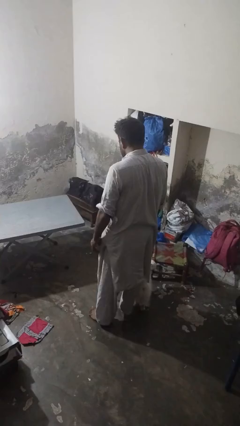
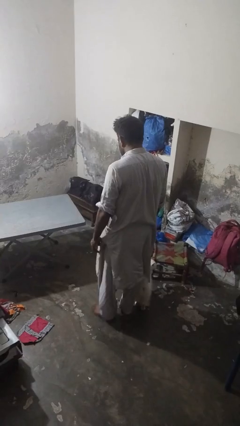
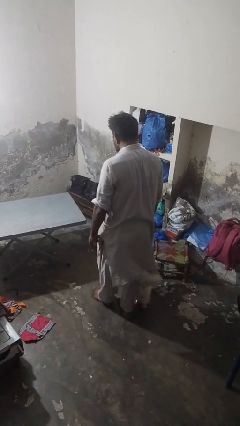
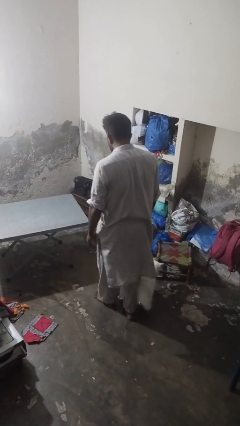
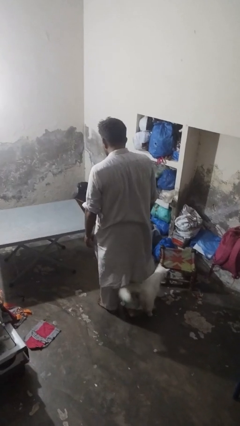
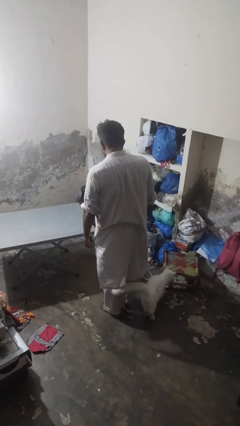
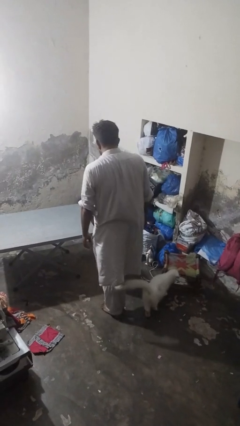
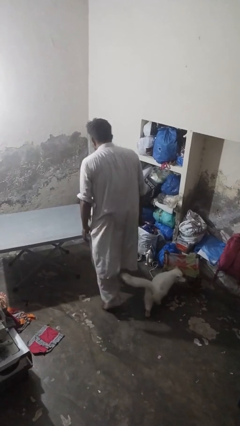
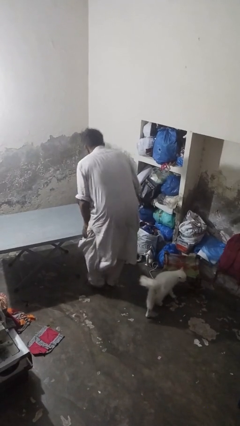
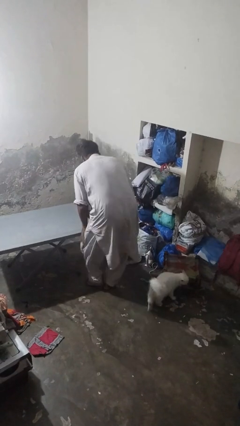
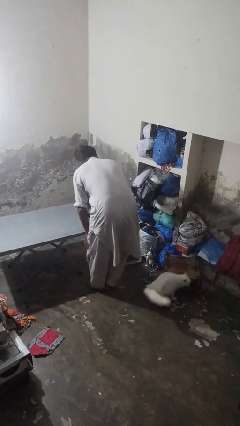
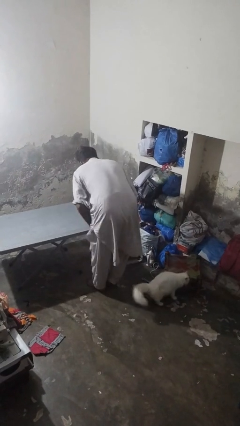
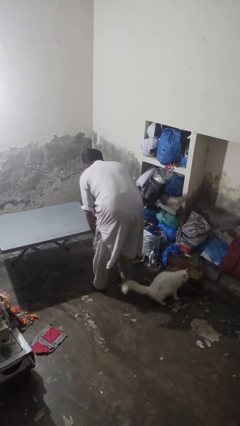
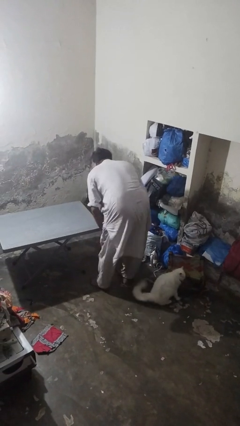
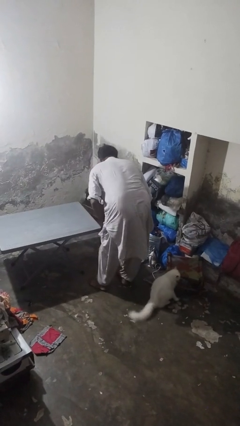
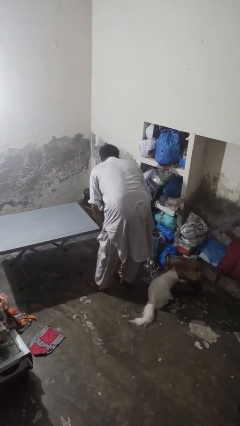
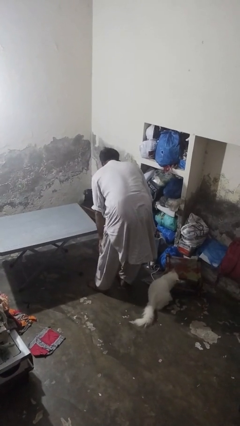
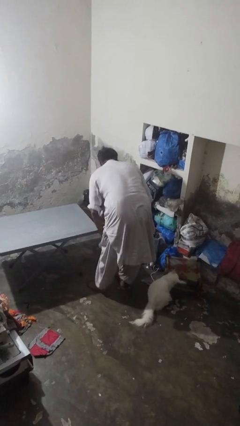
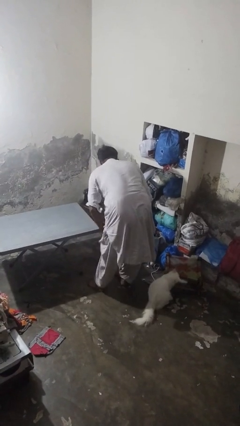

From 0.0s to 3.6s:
person bumps into table

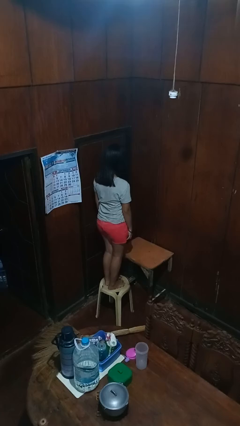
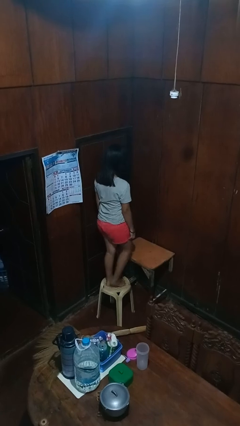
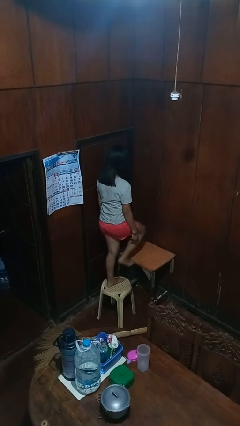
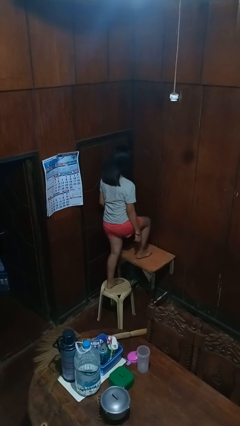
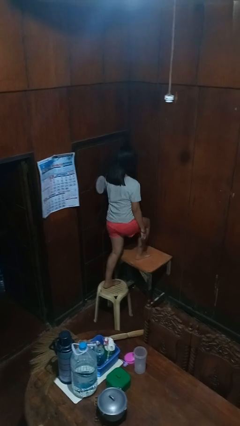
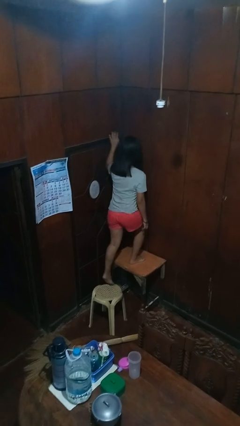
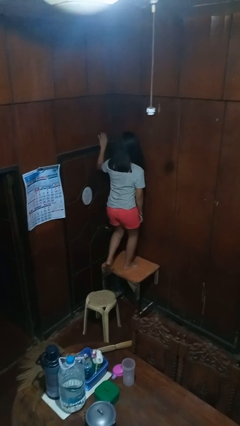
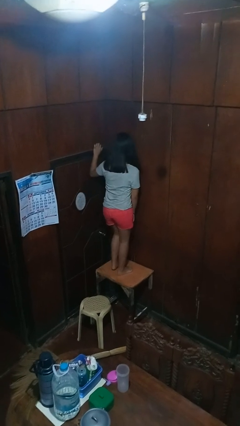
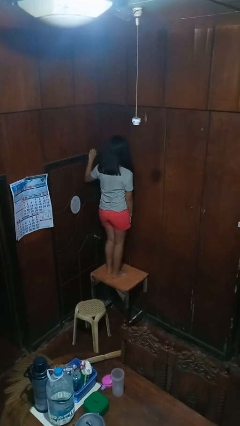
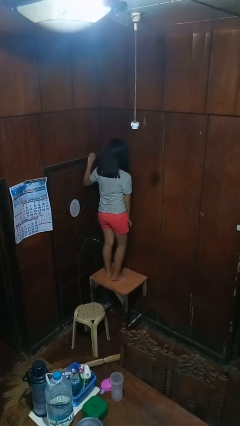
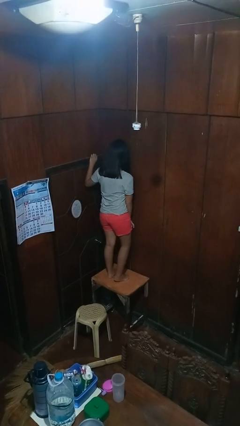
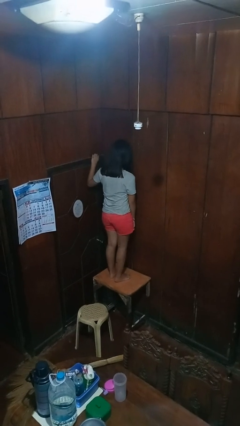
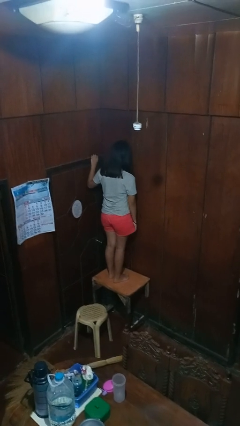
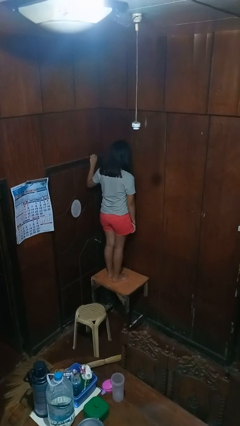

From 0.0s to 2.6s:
person climbs on table

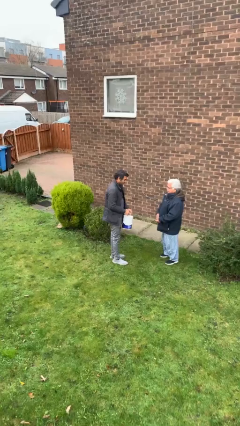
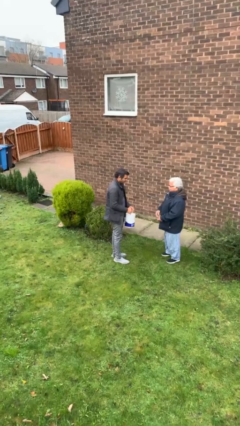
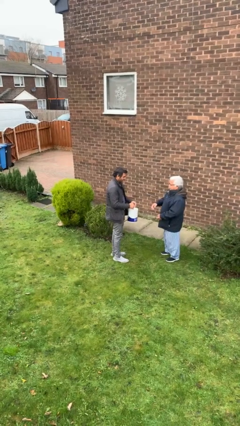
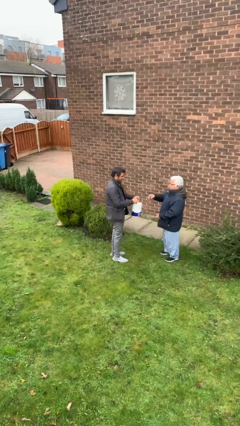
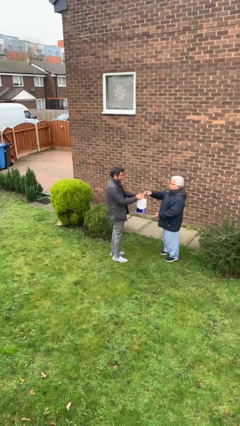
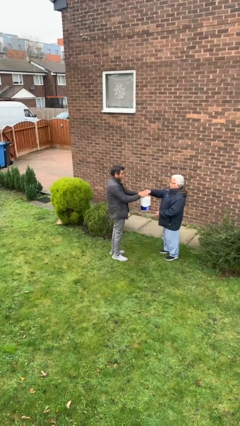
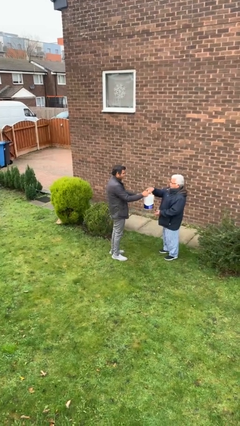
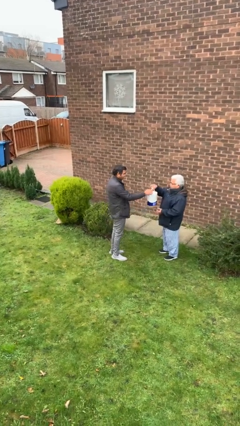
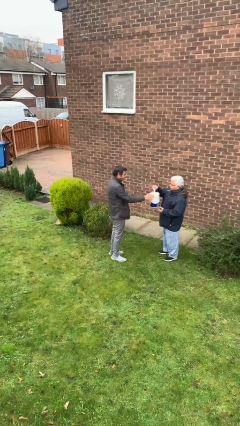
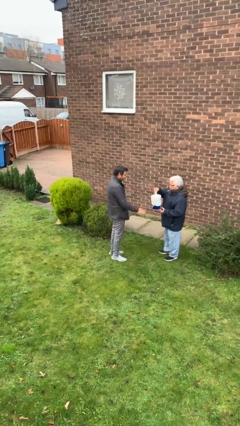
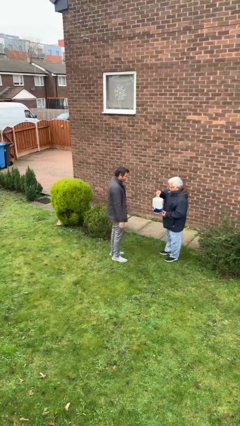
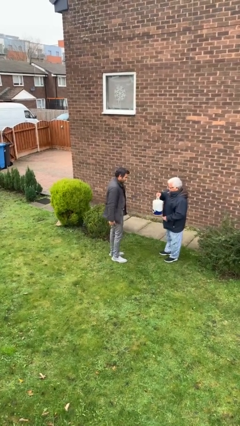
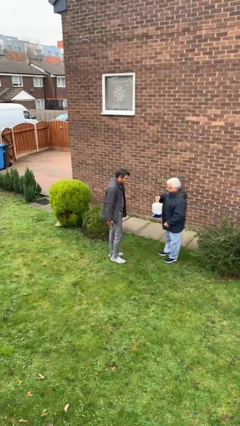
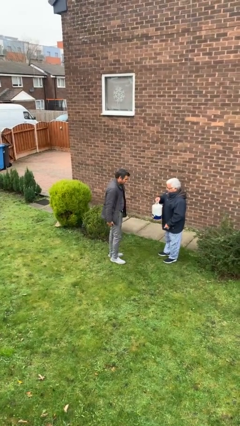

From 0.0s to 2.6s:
person transfers object to person

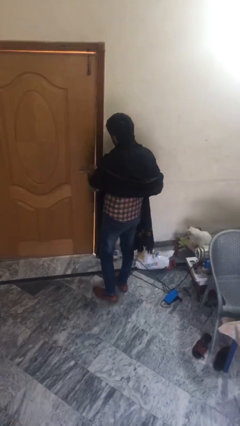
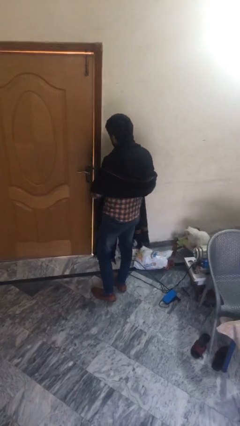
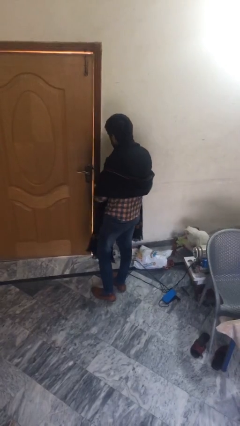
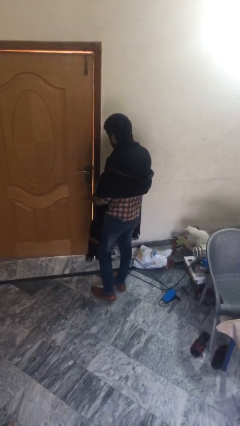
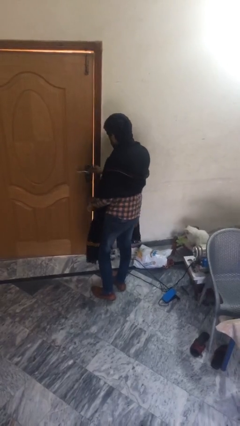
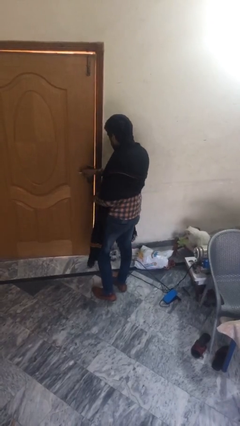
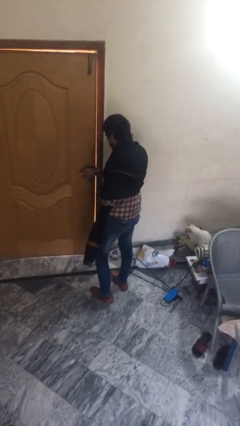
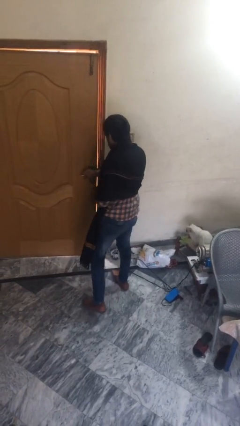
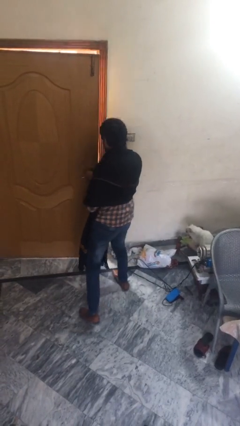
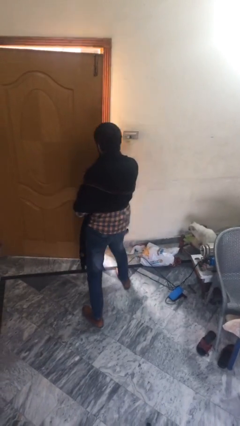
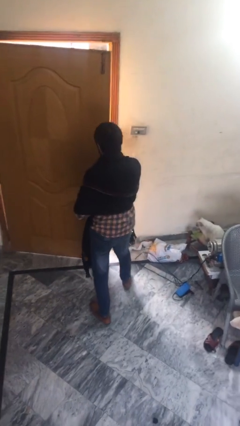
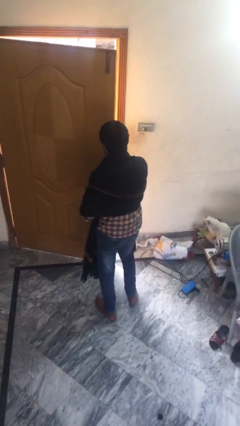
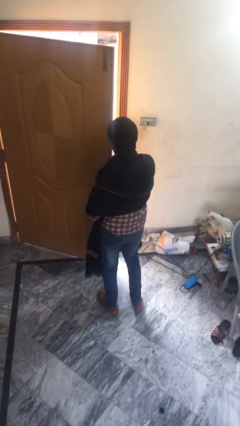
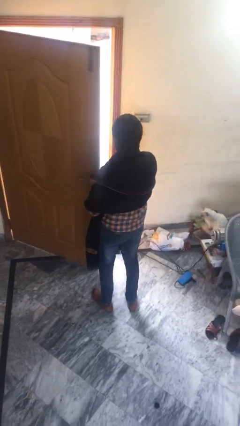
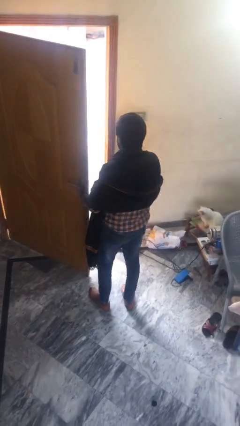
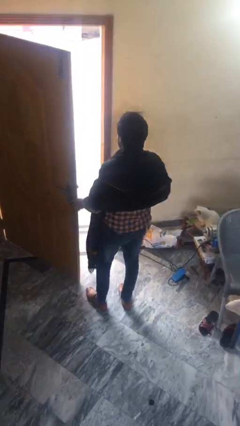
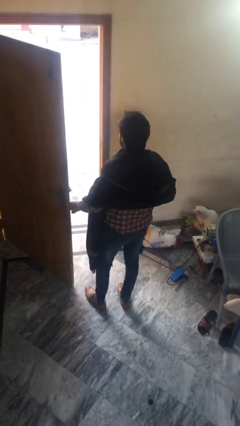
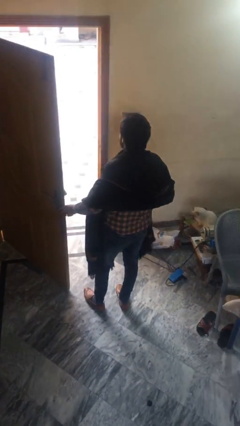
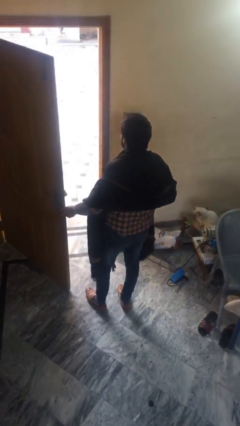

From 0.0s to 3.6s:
person opens facility door

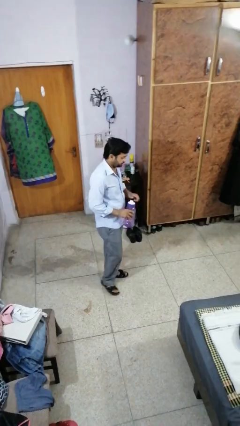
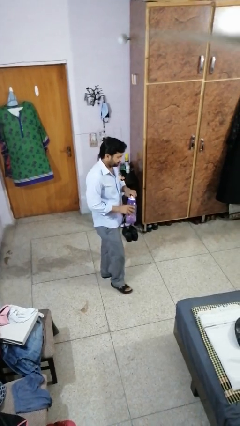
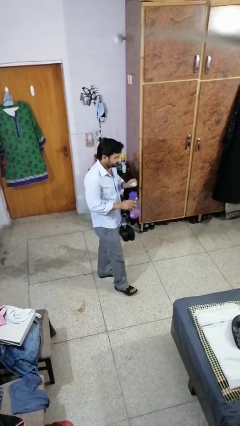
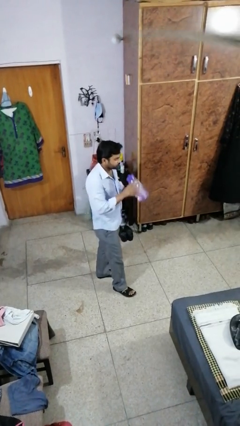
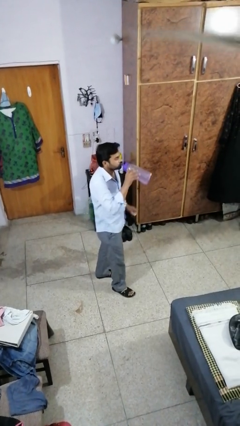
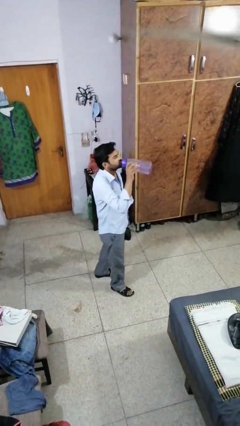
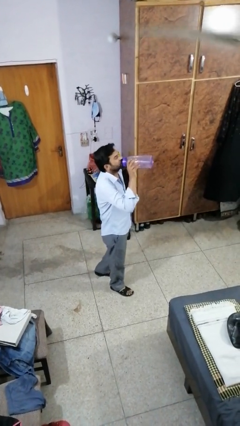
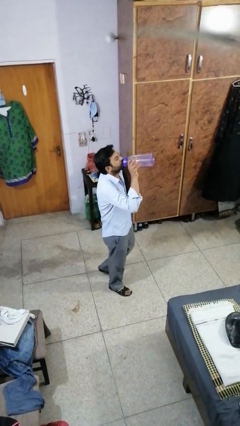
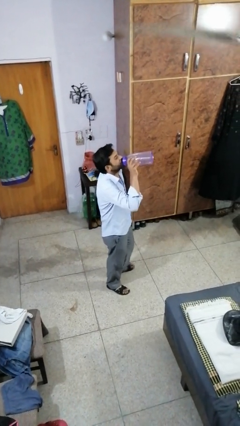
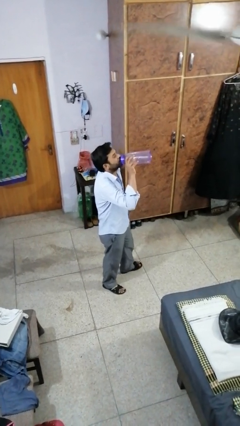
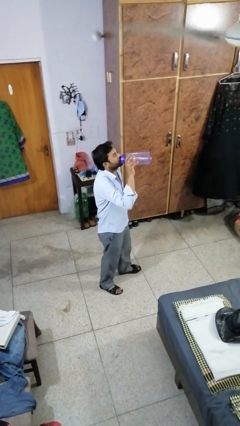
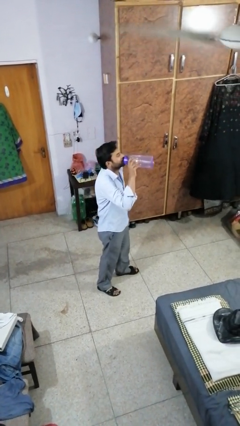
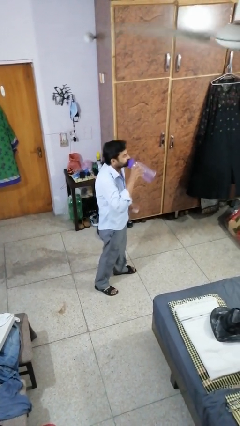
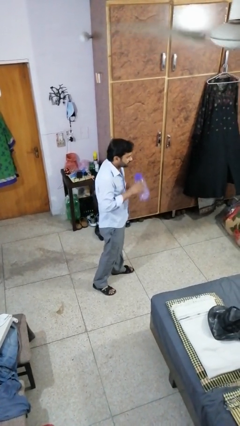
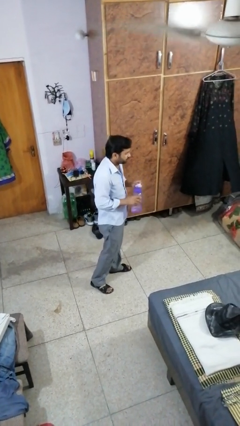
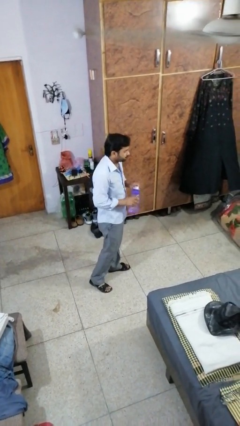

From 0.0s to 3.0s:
person drinks from bottle

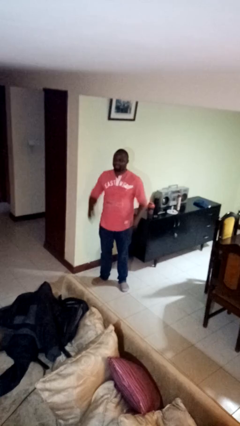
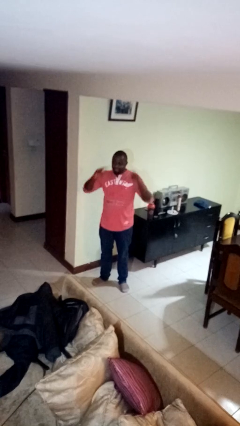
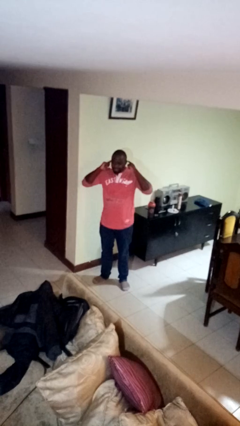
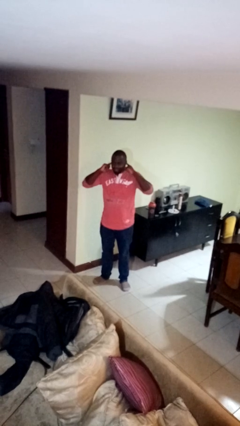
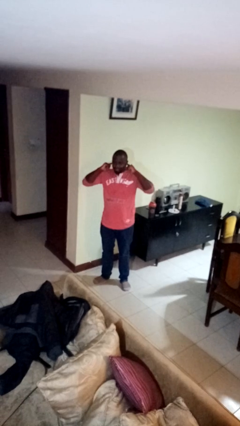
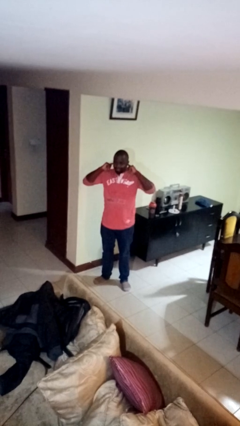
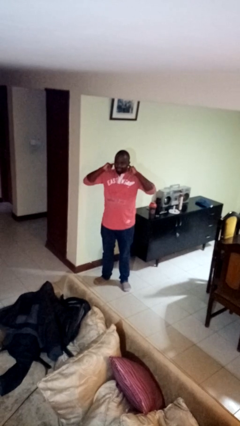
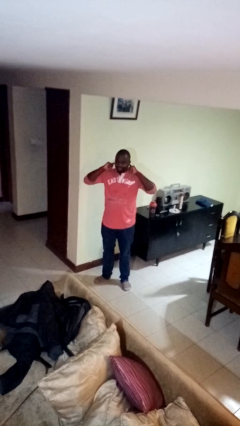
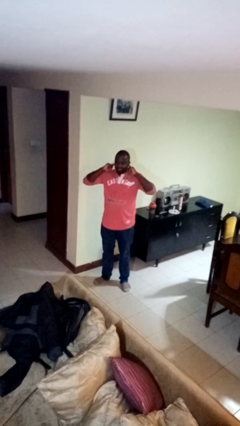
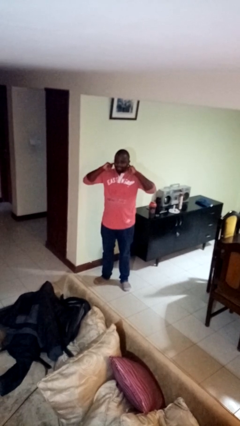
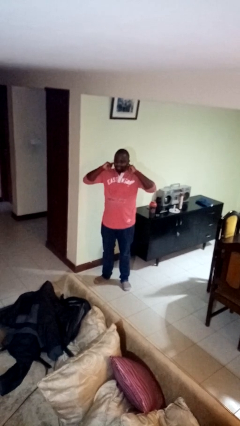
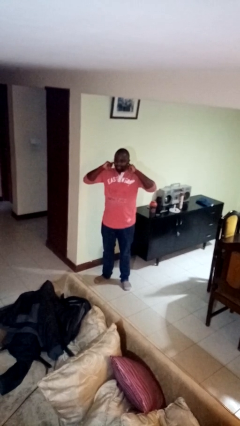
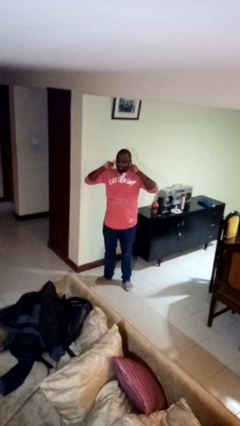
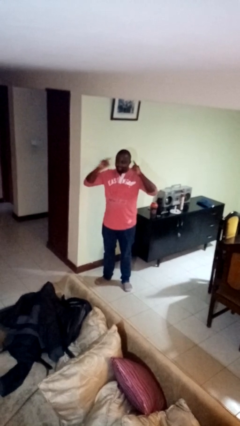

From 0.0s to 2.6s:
person puts fingers in ear
